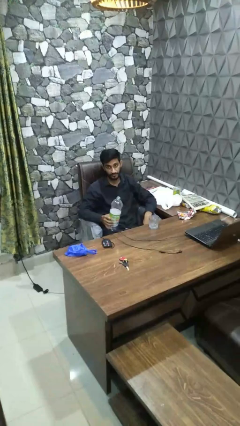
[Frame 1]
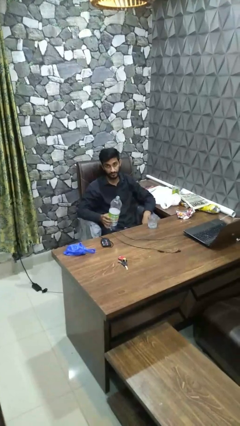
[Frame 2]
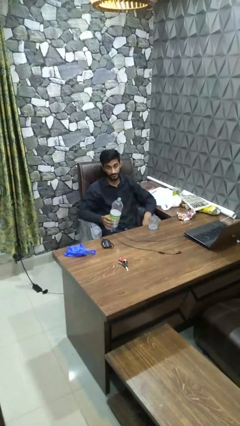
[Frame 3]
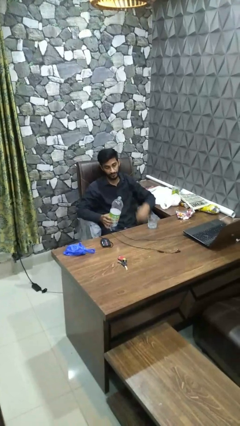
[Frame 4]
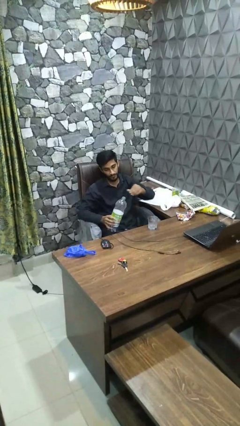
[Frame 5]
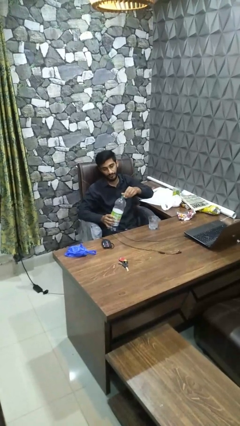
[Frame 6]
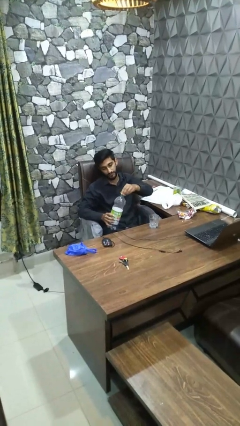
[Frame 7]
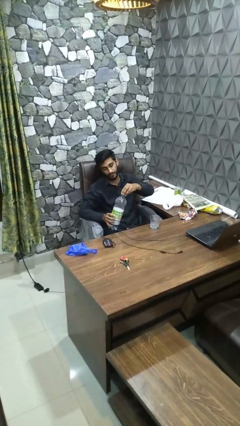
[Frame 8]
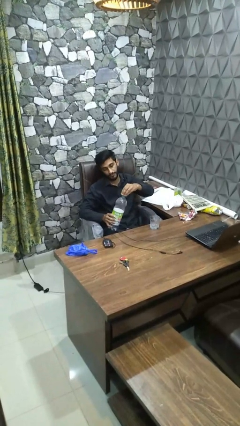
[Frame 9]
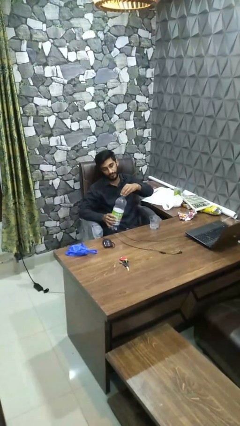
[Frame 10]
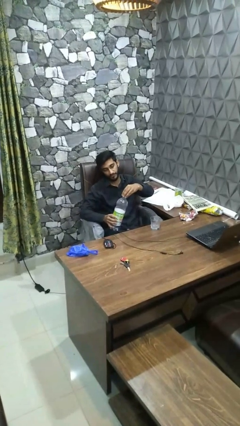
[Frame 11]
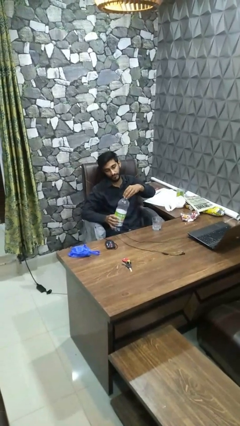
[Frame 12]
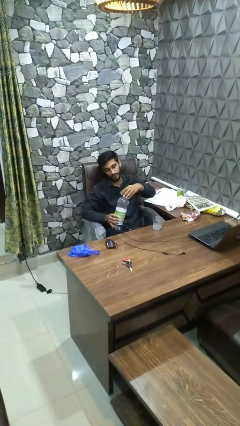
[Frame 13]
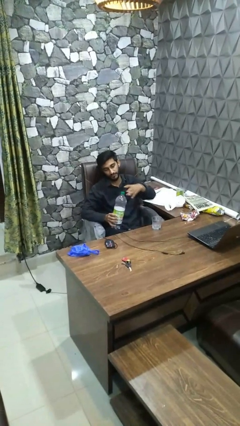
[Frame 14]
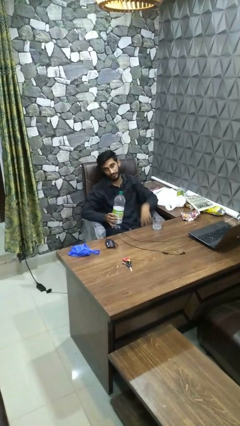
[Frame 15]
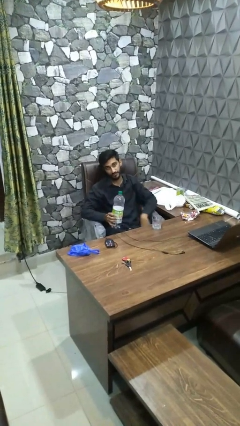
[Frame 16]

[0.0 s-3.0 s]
person screws lid to bottle

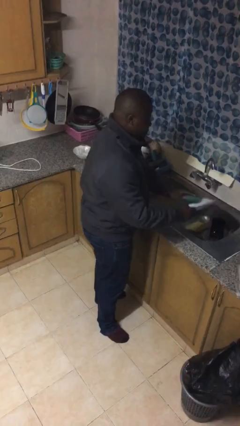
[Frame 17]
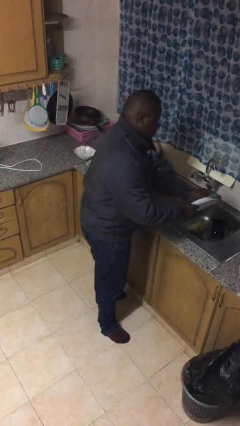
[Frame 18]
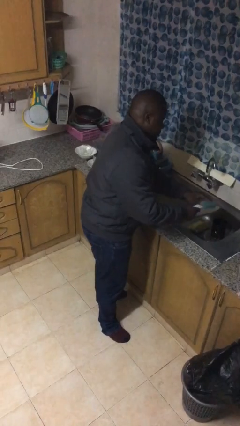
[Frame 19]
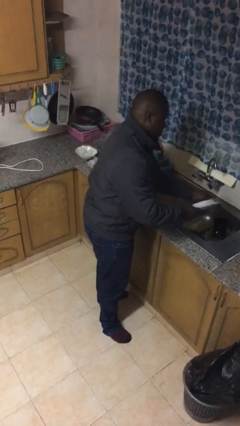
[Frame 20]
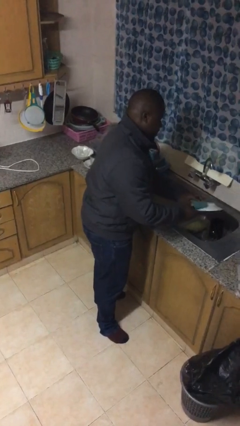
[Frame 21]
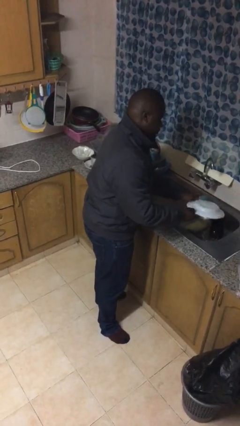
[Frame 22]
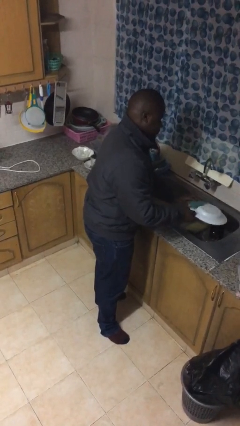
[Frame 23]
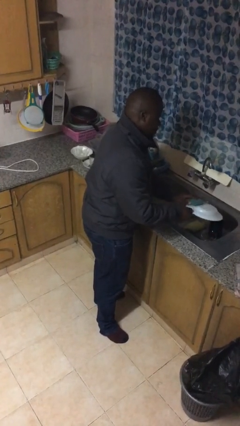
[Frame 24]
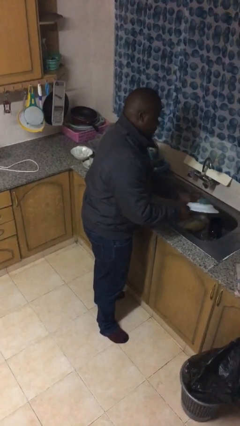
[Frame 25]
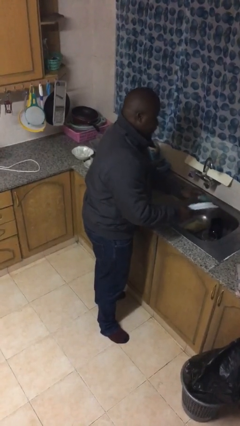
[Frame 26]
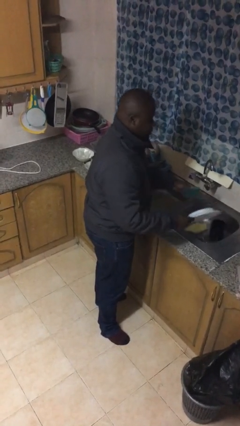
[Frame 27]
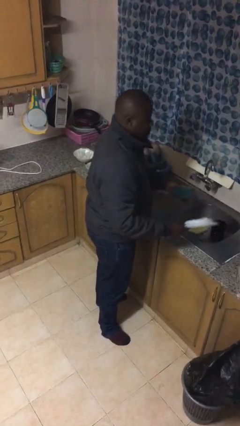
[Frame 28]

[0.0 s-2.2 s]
person washes dish

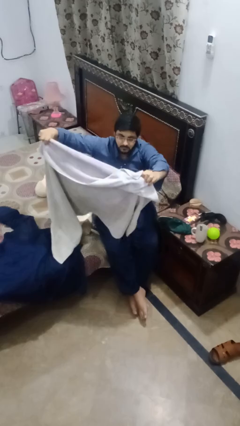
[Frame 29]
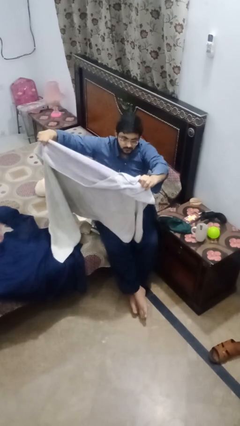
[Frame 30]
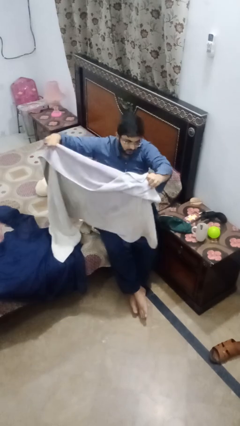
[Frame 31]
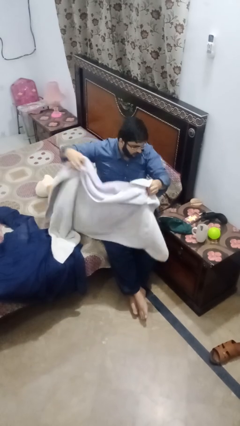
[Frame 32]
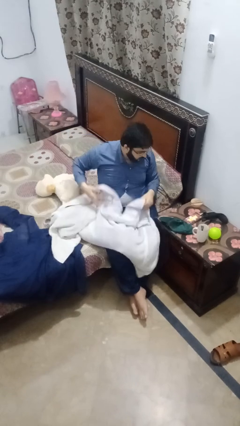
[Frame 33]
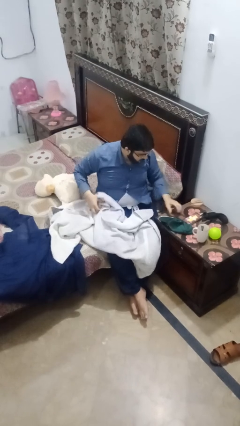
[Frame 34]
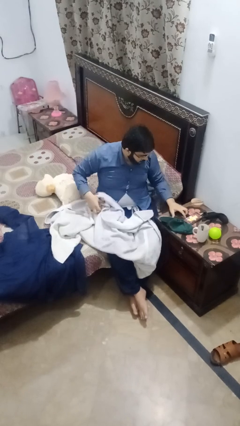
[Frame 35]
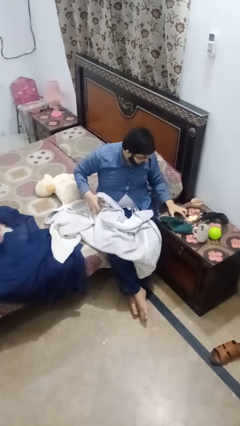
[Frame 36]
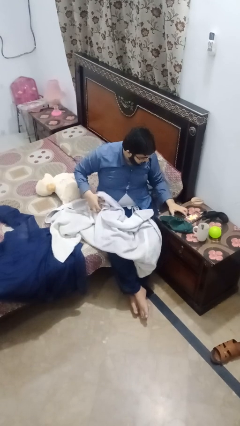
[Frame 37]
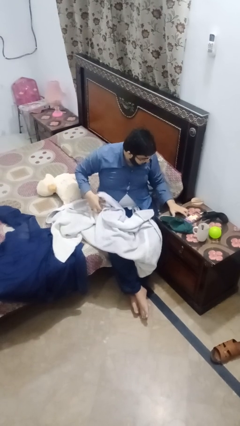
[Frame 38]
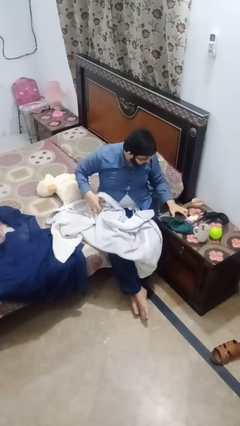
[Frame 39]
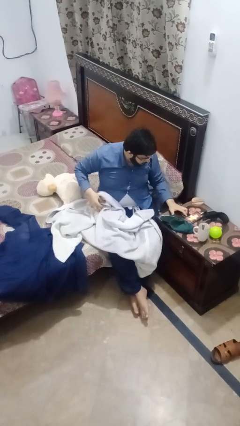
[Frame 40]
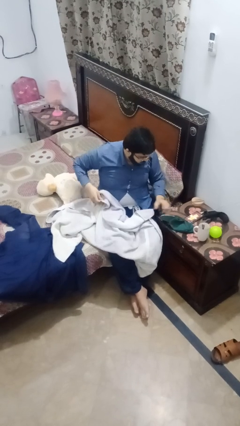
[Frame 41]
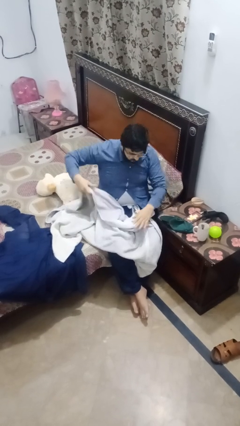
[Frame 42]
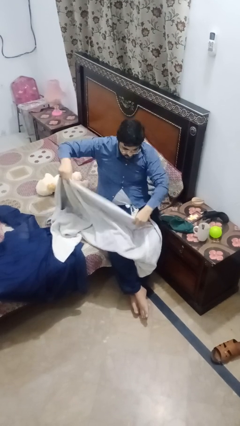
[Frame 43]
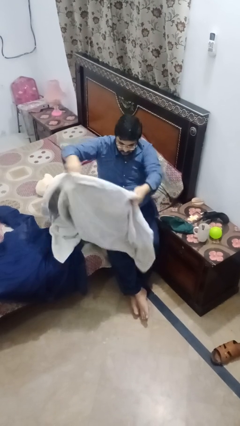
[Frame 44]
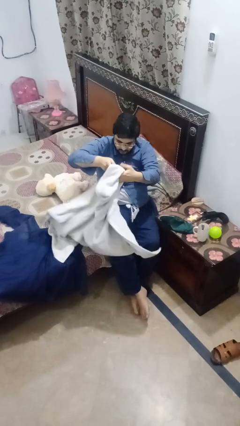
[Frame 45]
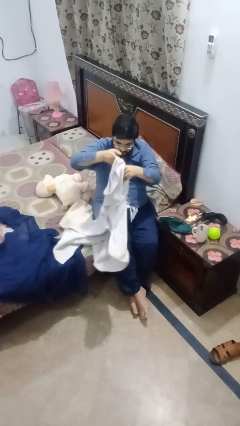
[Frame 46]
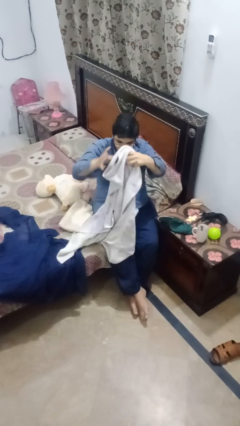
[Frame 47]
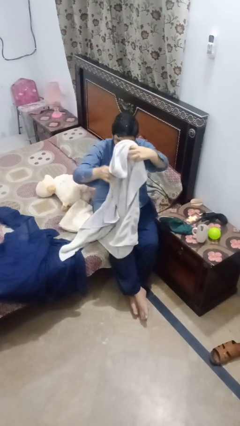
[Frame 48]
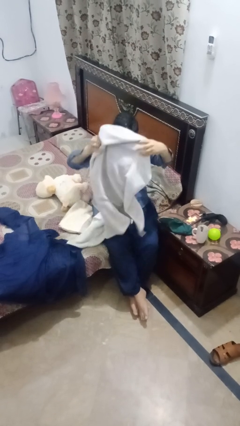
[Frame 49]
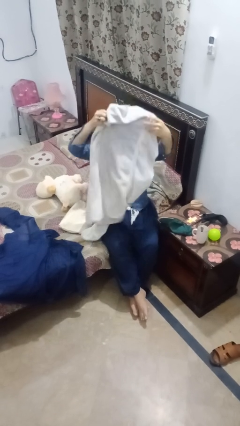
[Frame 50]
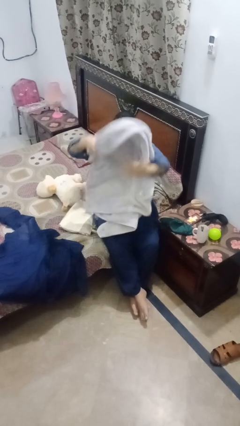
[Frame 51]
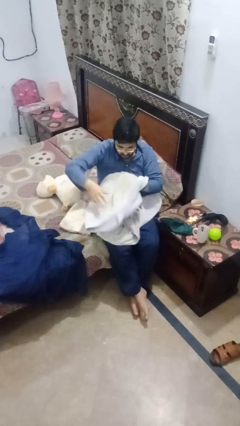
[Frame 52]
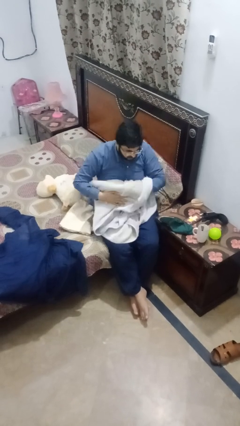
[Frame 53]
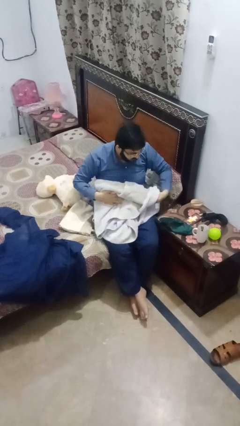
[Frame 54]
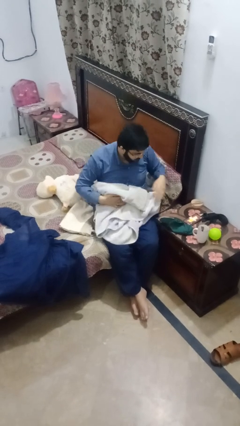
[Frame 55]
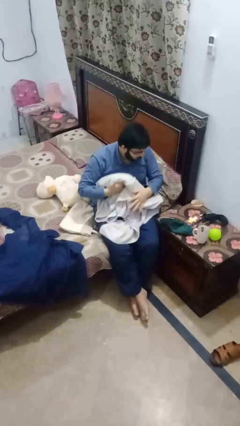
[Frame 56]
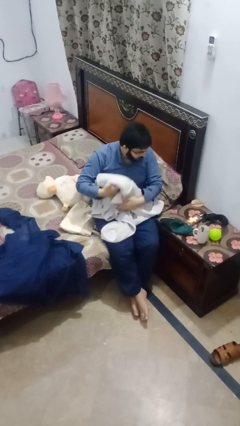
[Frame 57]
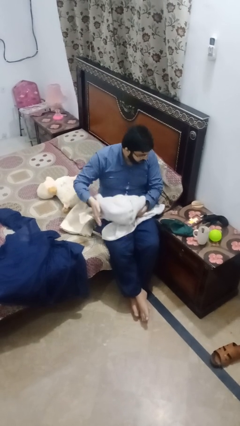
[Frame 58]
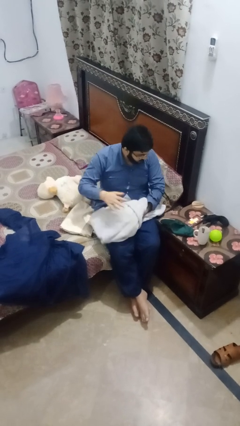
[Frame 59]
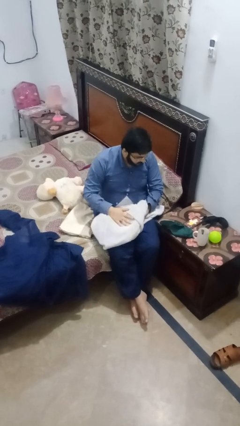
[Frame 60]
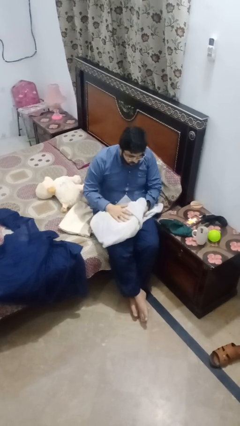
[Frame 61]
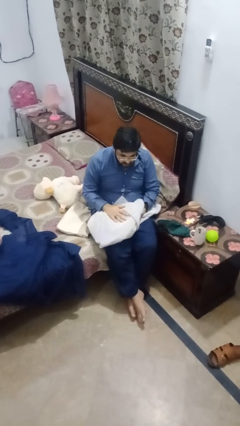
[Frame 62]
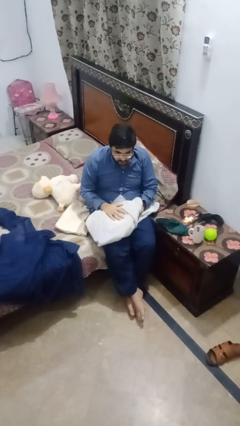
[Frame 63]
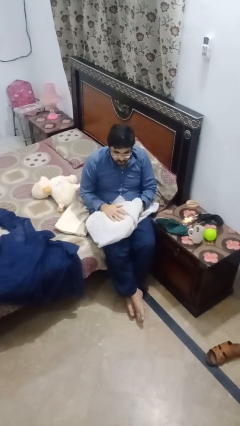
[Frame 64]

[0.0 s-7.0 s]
person folds towel

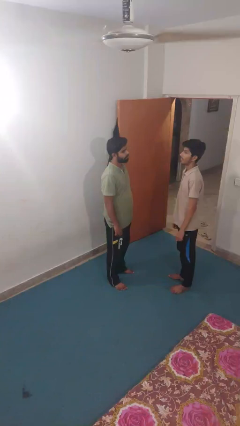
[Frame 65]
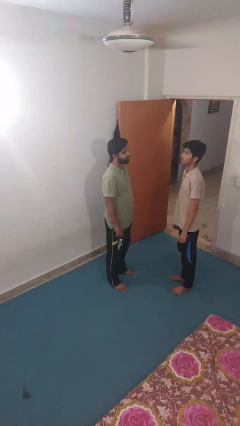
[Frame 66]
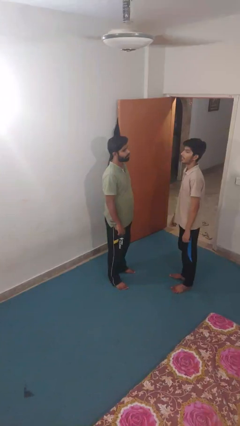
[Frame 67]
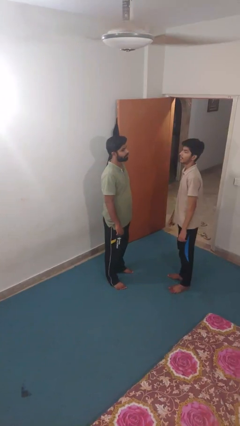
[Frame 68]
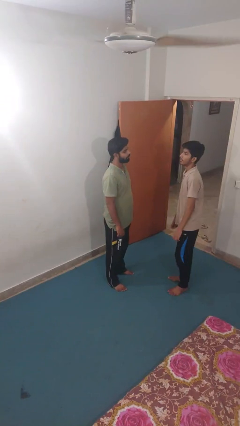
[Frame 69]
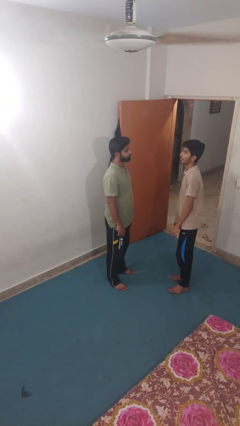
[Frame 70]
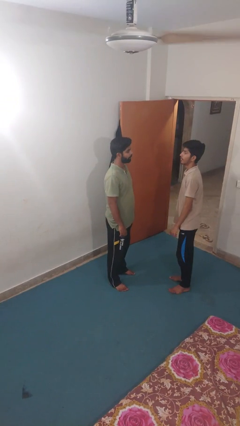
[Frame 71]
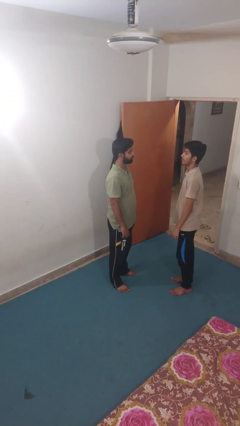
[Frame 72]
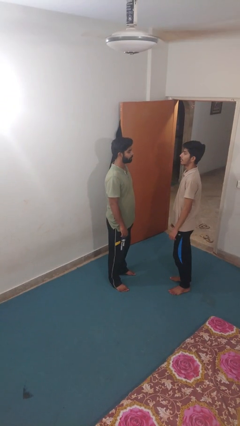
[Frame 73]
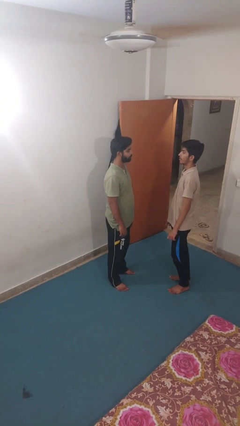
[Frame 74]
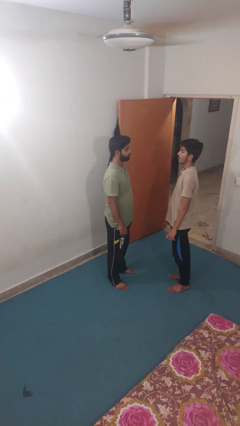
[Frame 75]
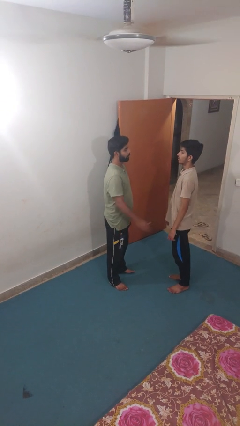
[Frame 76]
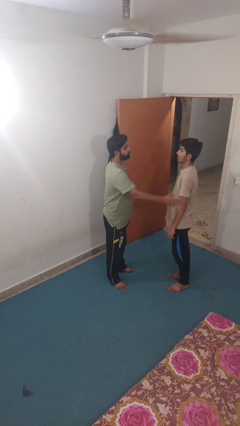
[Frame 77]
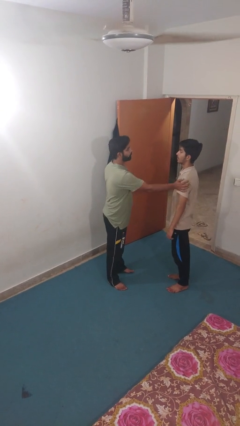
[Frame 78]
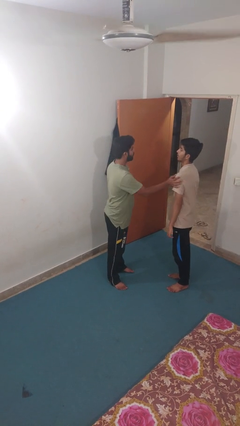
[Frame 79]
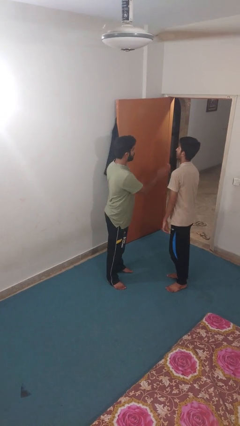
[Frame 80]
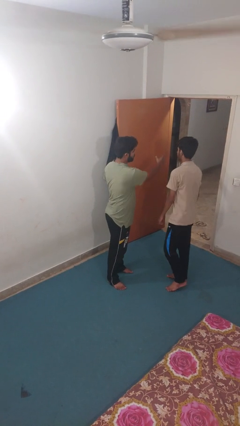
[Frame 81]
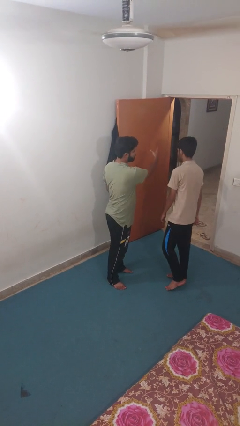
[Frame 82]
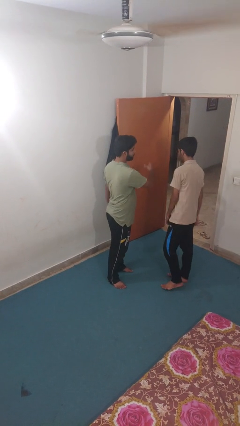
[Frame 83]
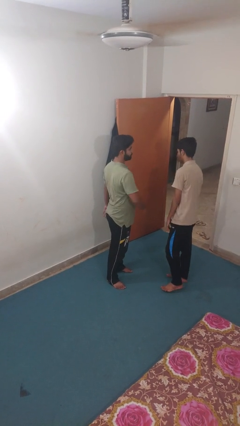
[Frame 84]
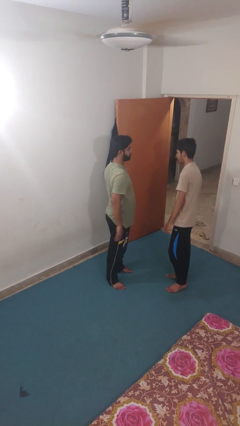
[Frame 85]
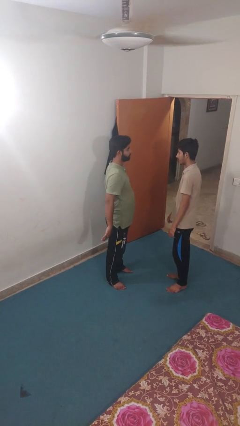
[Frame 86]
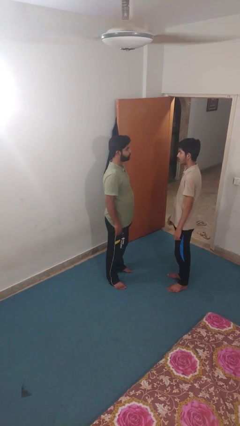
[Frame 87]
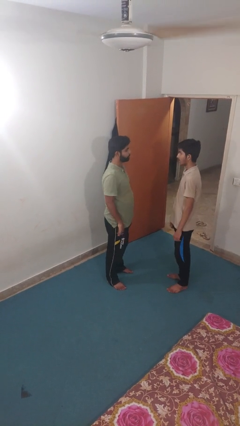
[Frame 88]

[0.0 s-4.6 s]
person shoves person

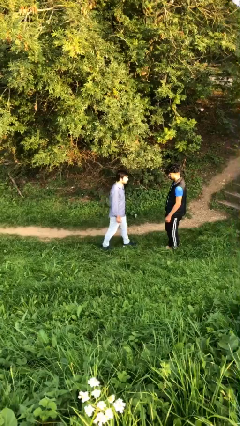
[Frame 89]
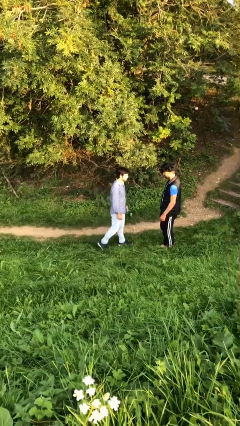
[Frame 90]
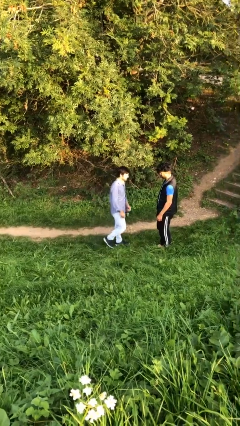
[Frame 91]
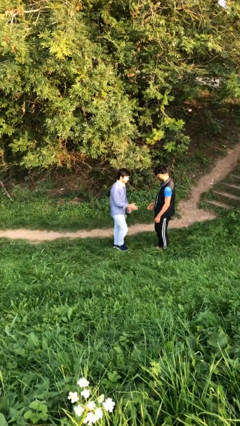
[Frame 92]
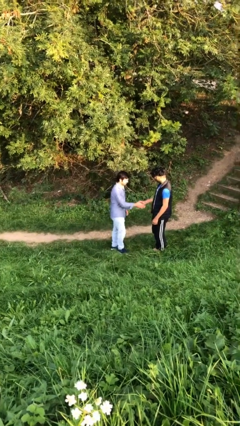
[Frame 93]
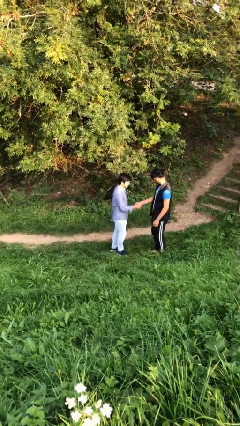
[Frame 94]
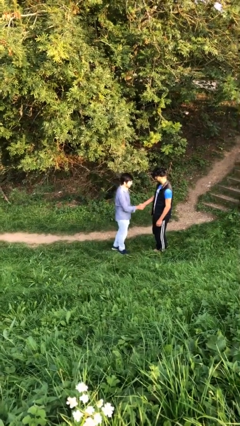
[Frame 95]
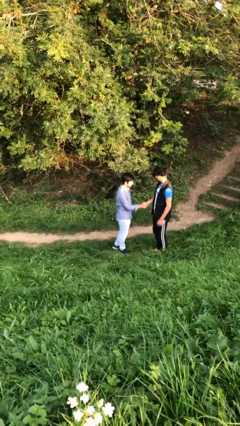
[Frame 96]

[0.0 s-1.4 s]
person shakes hand
